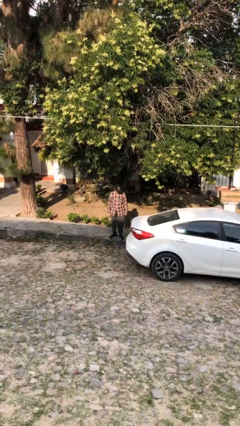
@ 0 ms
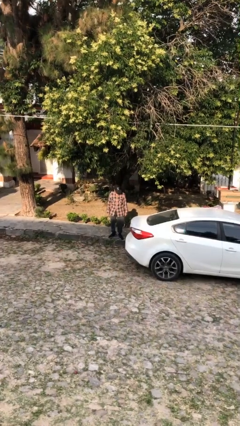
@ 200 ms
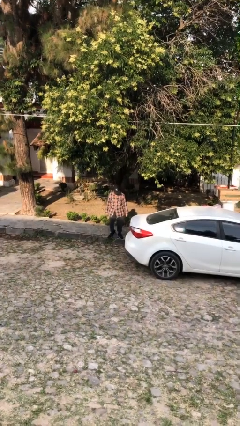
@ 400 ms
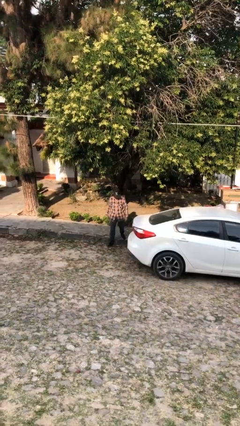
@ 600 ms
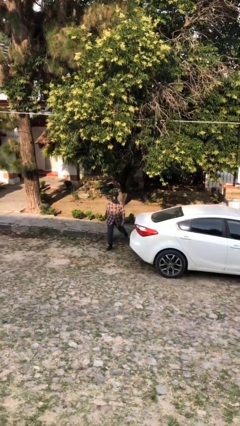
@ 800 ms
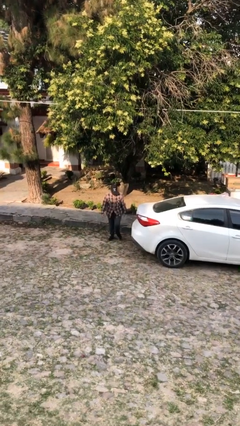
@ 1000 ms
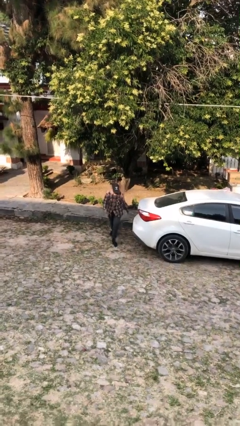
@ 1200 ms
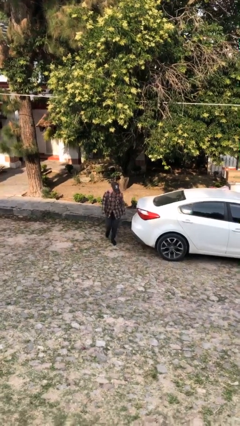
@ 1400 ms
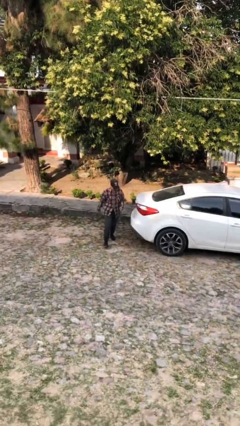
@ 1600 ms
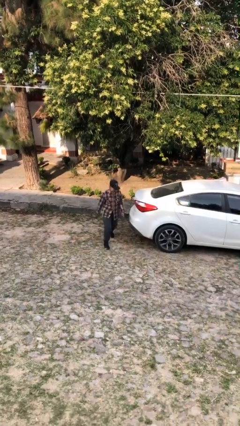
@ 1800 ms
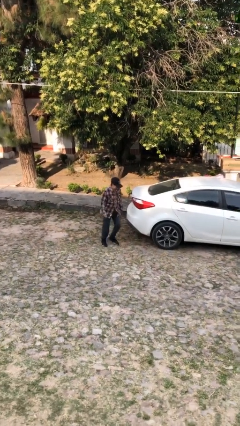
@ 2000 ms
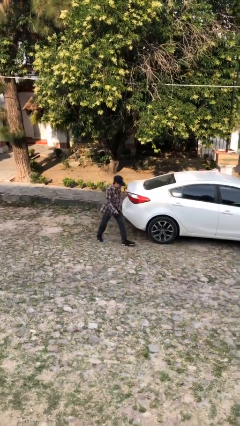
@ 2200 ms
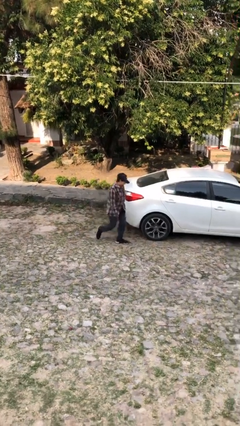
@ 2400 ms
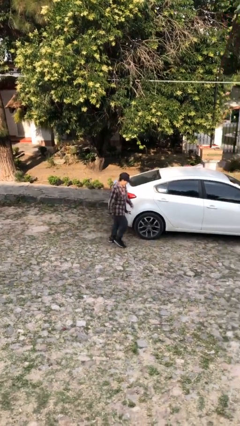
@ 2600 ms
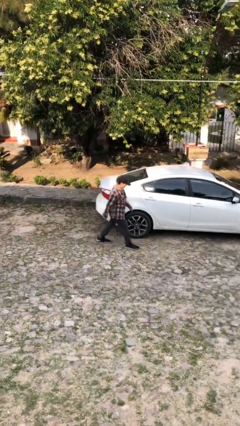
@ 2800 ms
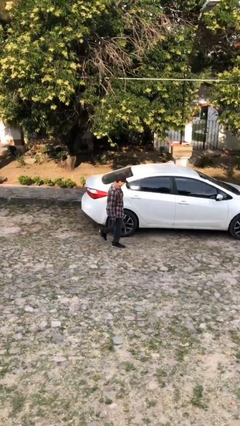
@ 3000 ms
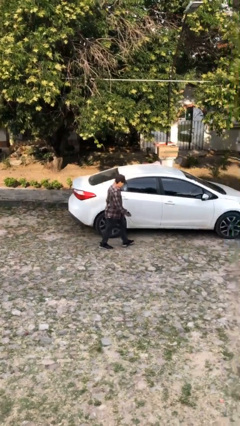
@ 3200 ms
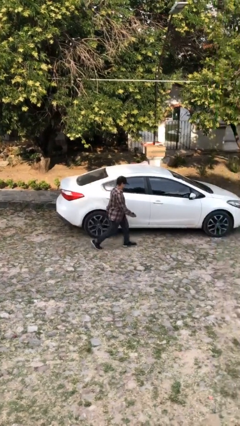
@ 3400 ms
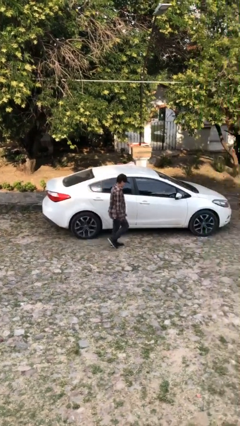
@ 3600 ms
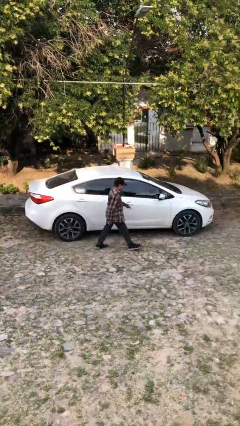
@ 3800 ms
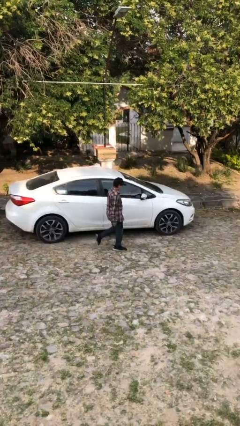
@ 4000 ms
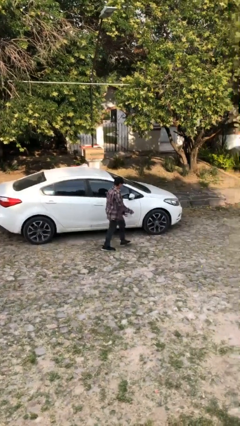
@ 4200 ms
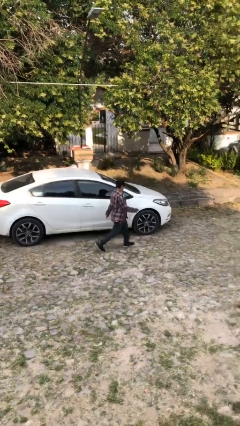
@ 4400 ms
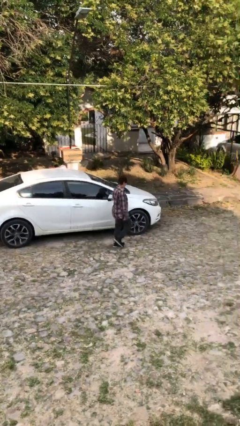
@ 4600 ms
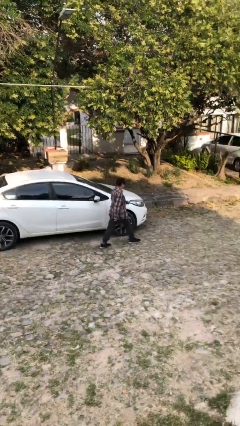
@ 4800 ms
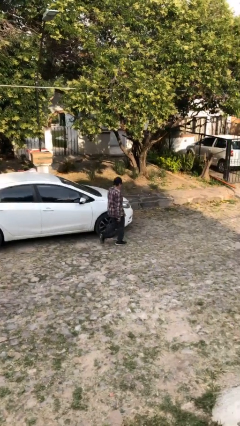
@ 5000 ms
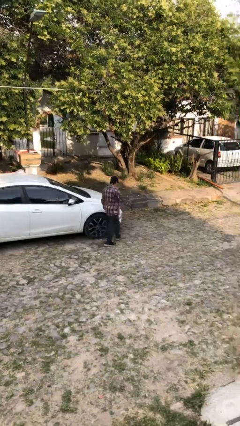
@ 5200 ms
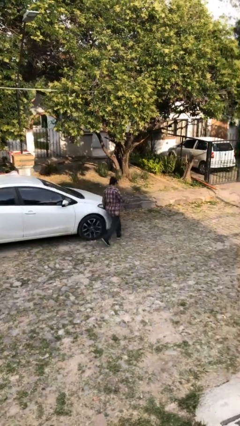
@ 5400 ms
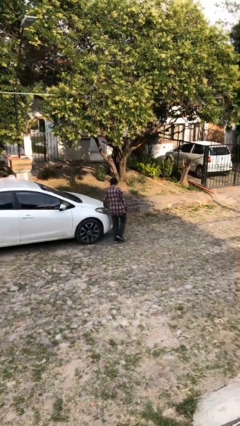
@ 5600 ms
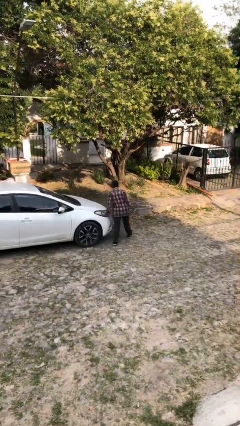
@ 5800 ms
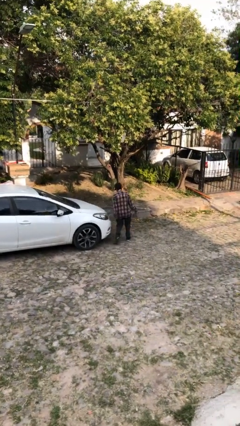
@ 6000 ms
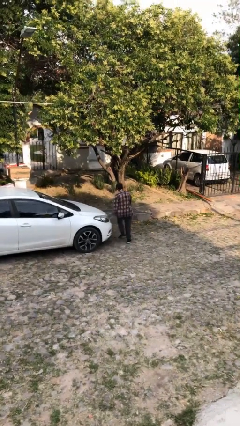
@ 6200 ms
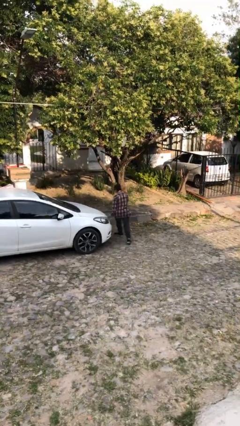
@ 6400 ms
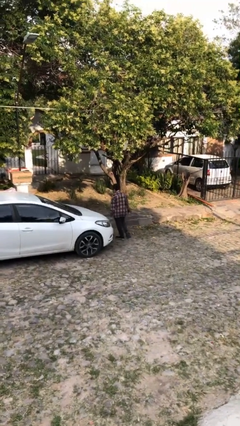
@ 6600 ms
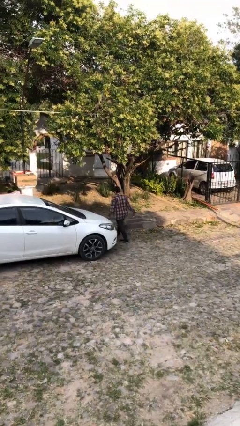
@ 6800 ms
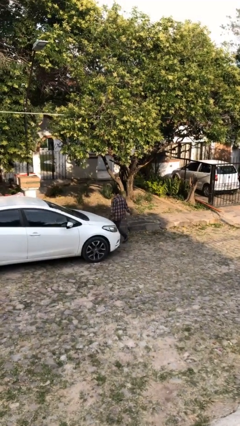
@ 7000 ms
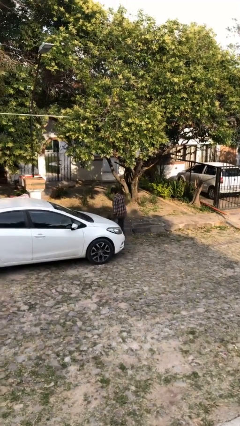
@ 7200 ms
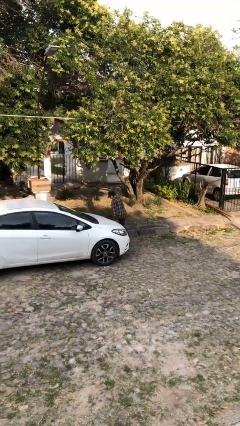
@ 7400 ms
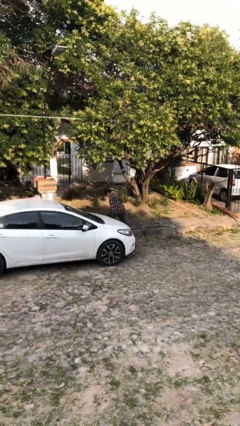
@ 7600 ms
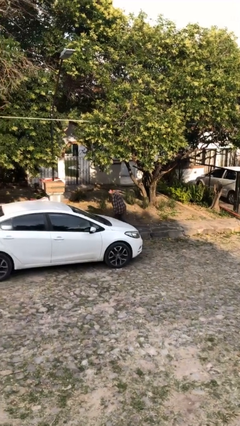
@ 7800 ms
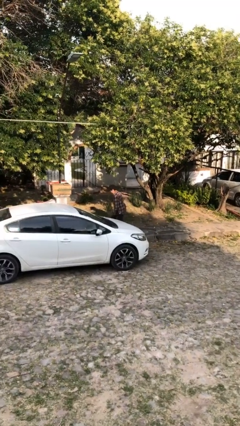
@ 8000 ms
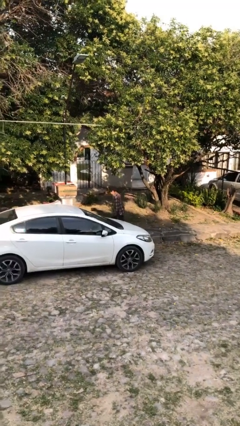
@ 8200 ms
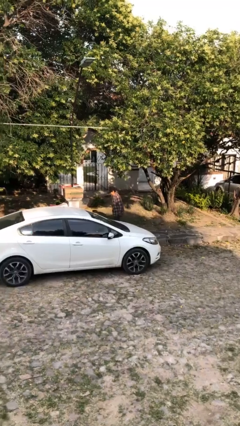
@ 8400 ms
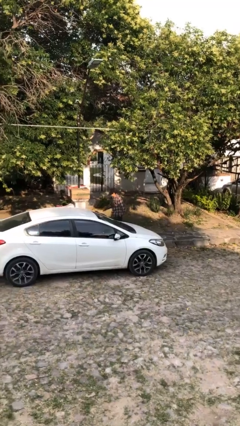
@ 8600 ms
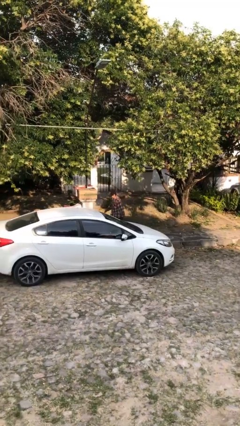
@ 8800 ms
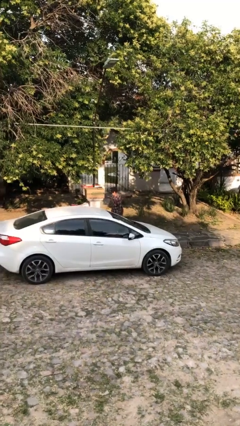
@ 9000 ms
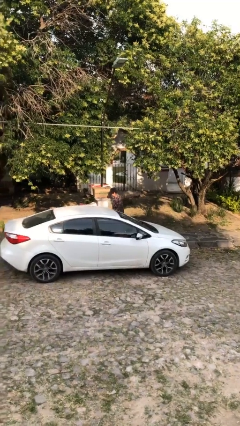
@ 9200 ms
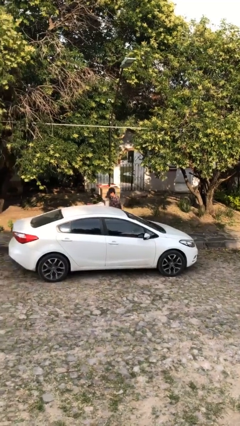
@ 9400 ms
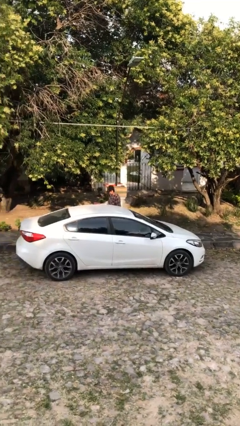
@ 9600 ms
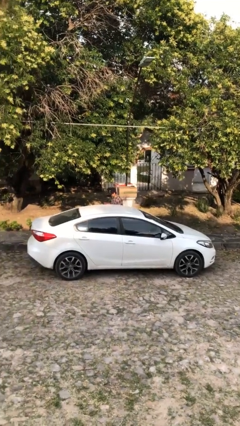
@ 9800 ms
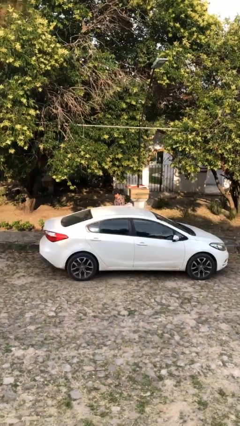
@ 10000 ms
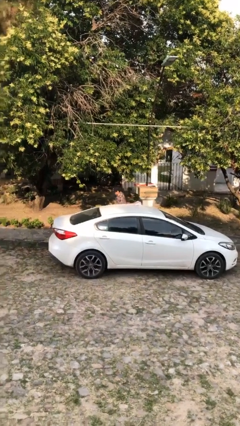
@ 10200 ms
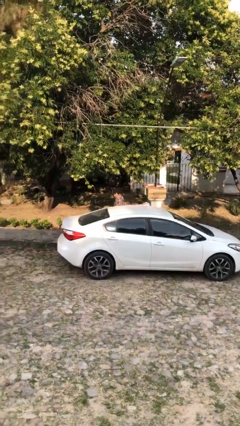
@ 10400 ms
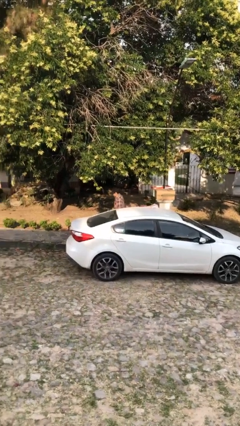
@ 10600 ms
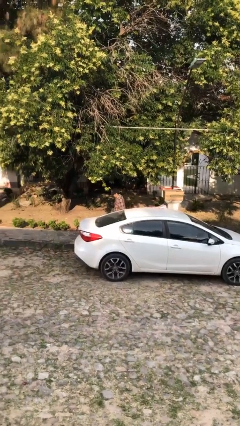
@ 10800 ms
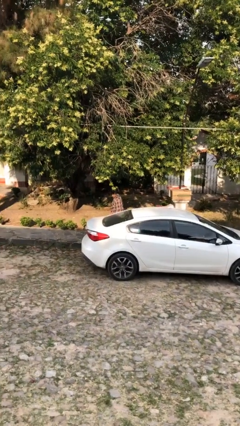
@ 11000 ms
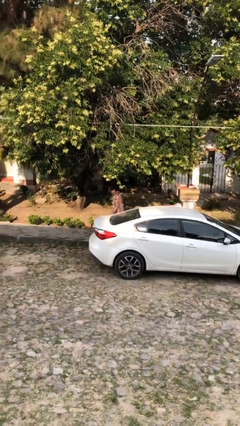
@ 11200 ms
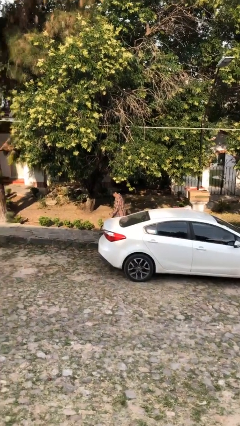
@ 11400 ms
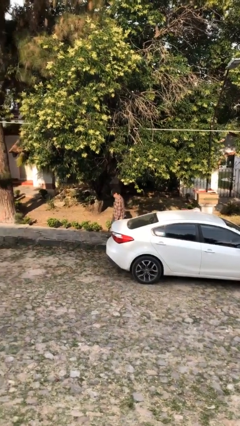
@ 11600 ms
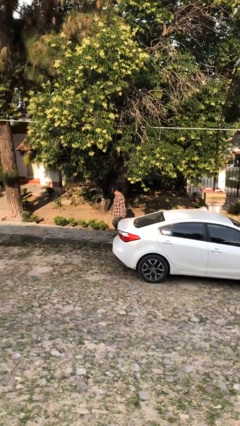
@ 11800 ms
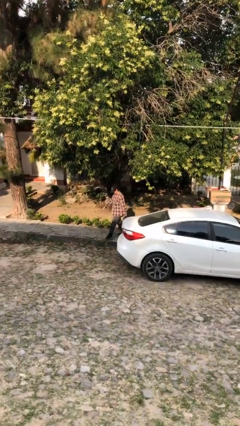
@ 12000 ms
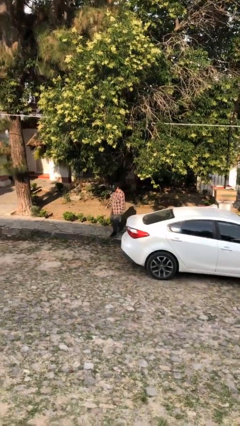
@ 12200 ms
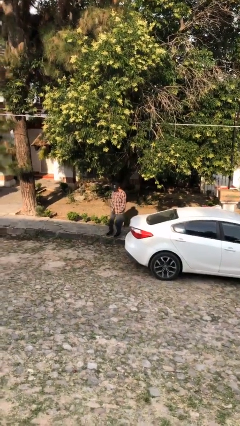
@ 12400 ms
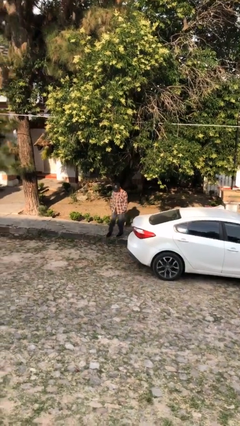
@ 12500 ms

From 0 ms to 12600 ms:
person walks around car

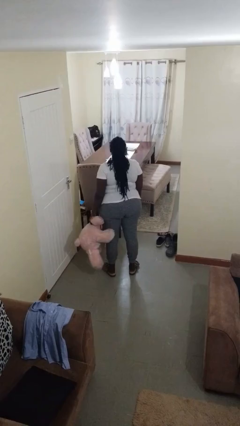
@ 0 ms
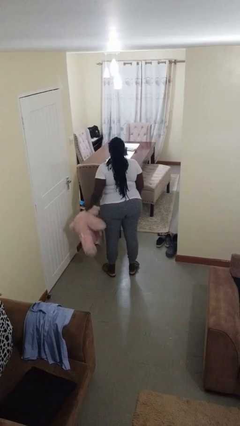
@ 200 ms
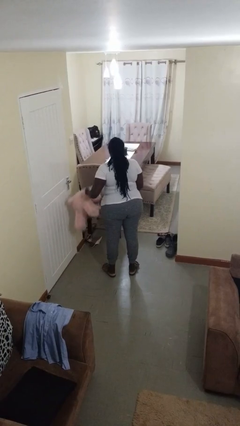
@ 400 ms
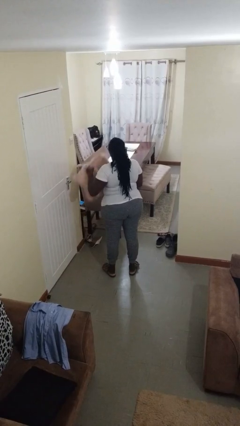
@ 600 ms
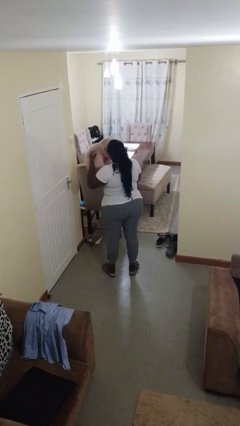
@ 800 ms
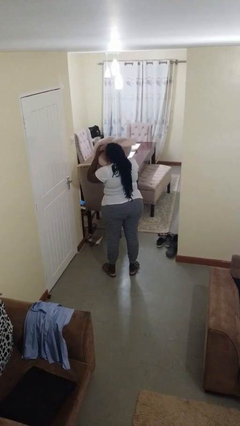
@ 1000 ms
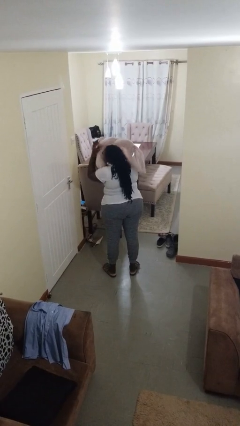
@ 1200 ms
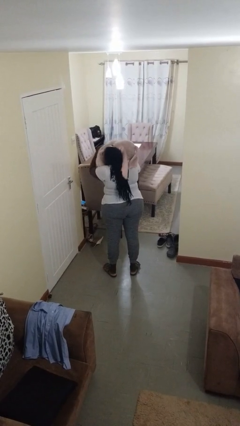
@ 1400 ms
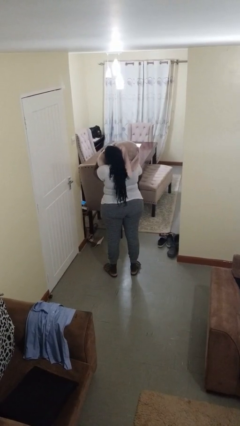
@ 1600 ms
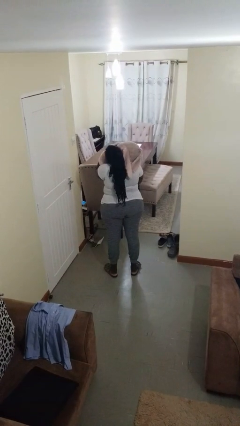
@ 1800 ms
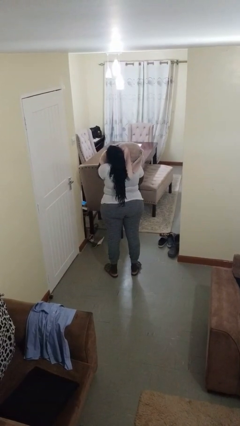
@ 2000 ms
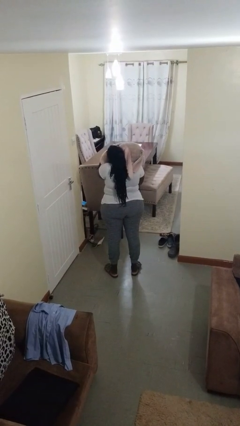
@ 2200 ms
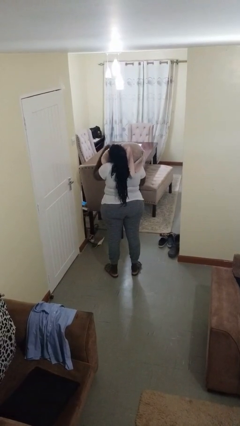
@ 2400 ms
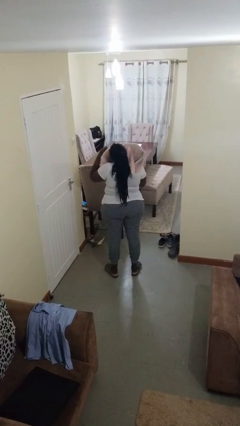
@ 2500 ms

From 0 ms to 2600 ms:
person hugs stuffed animal

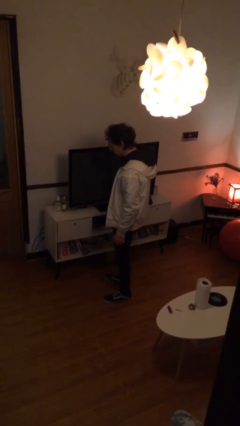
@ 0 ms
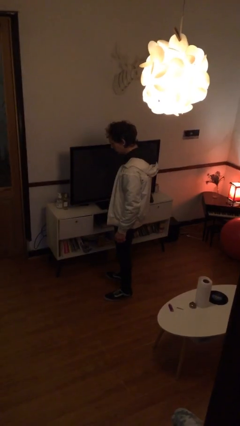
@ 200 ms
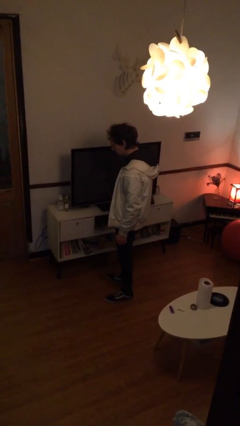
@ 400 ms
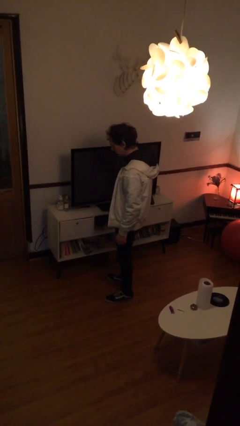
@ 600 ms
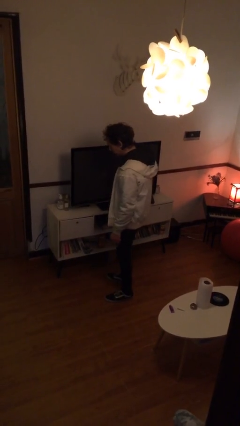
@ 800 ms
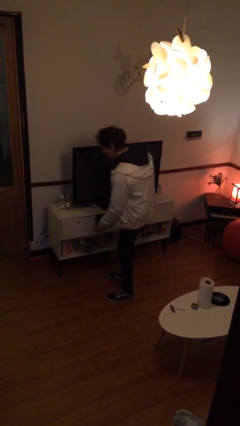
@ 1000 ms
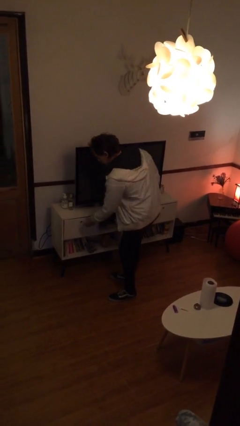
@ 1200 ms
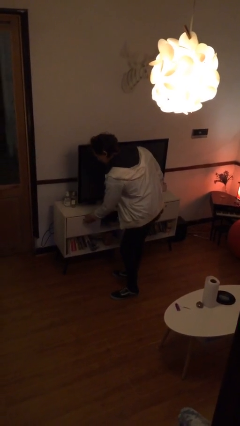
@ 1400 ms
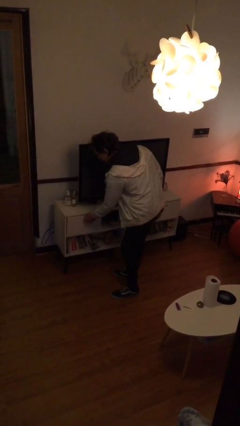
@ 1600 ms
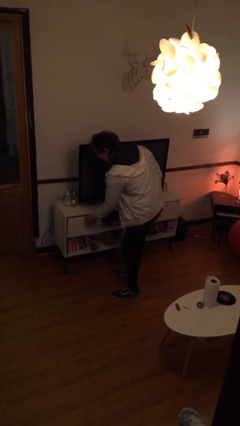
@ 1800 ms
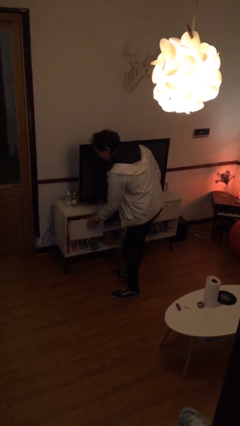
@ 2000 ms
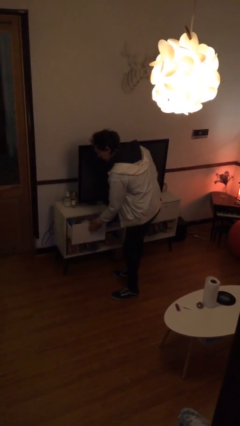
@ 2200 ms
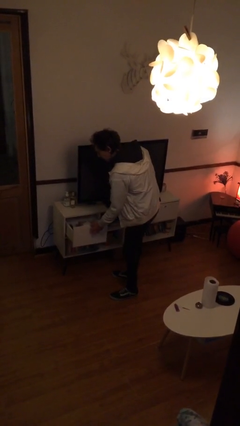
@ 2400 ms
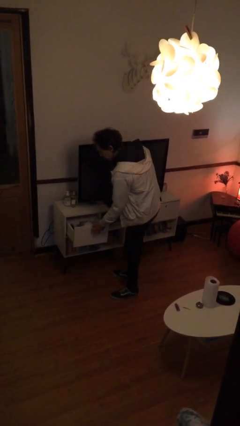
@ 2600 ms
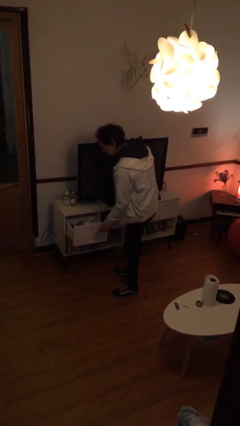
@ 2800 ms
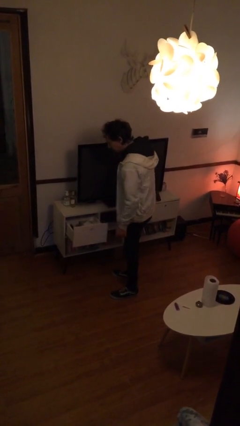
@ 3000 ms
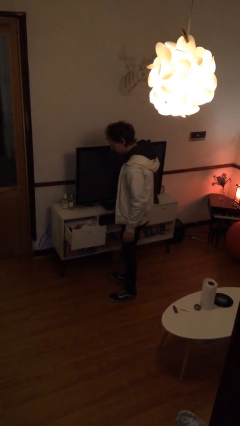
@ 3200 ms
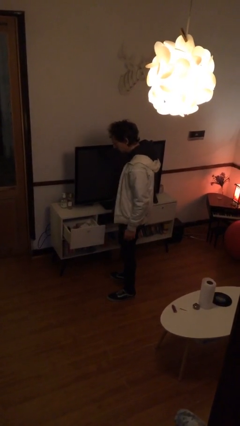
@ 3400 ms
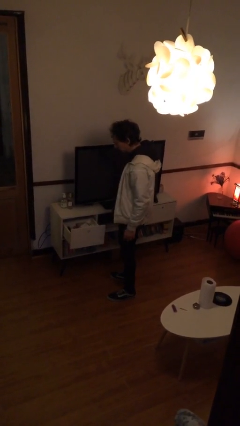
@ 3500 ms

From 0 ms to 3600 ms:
person opens dresser drawer
